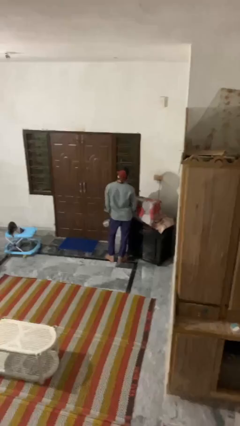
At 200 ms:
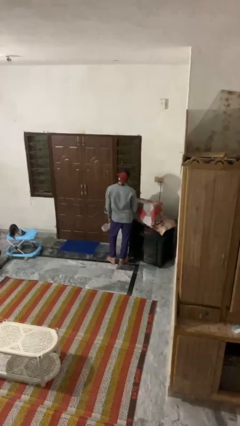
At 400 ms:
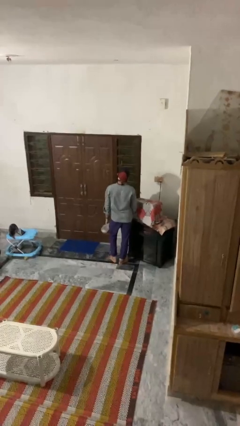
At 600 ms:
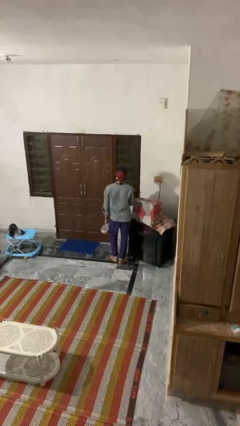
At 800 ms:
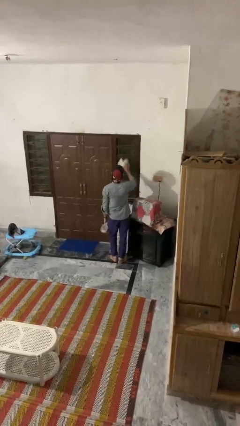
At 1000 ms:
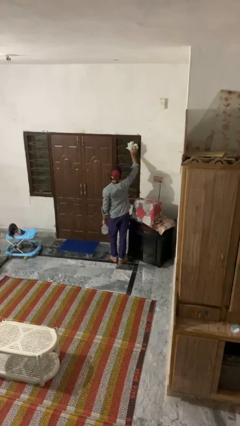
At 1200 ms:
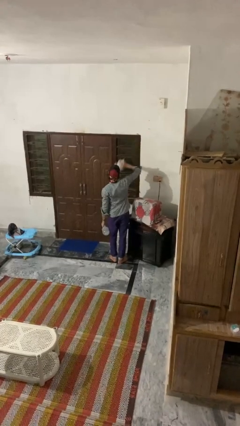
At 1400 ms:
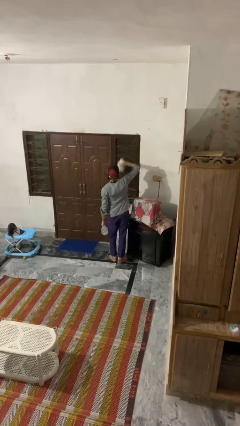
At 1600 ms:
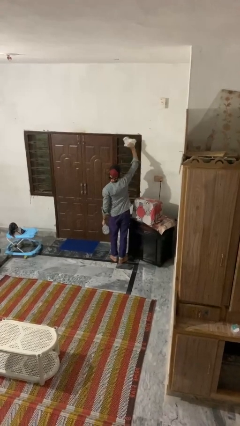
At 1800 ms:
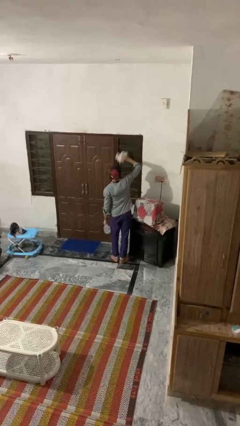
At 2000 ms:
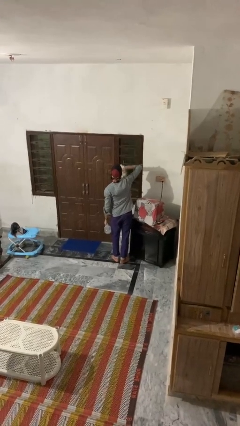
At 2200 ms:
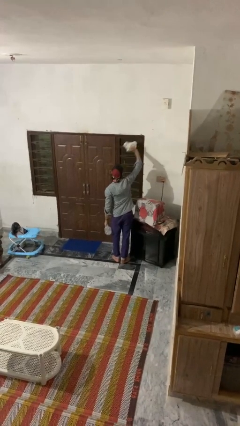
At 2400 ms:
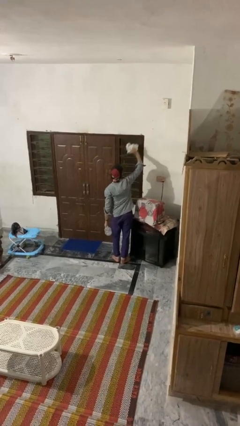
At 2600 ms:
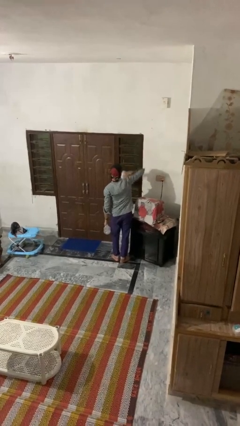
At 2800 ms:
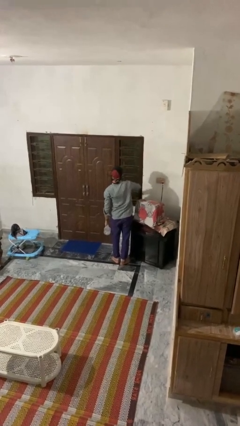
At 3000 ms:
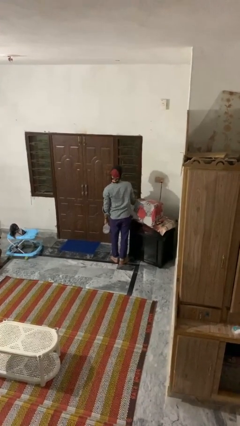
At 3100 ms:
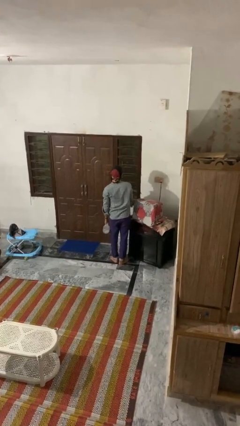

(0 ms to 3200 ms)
person washes window

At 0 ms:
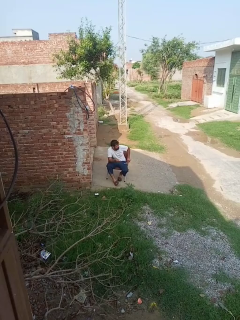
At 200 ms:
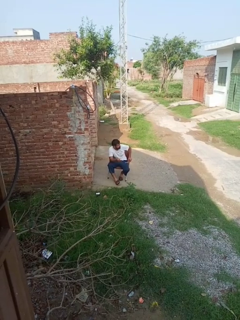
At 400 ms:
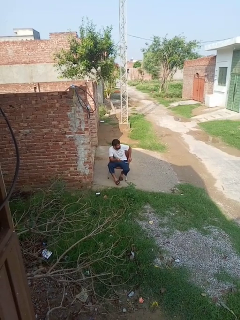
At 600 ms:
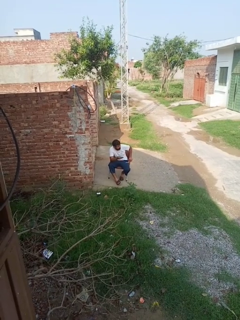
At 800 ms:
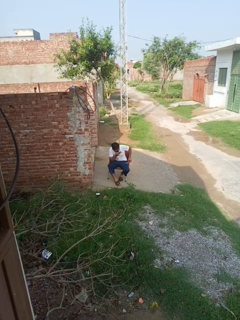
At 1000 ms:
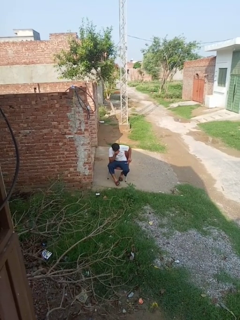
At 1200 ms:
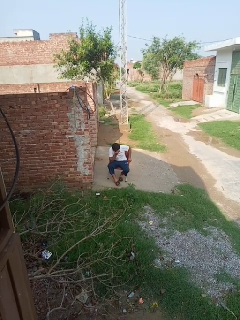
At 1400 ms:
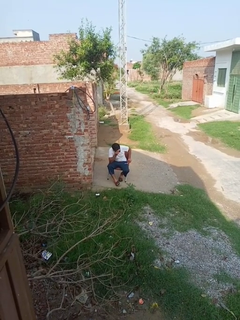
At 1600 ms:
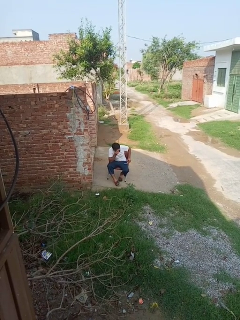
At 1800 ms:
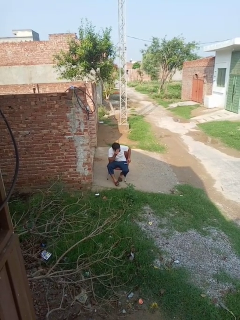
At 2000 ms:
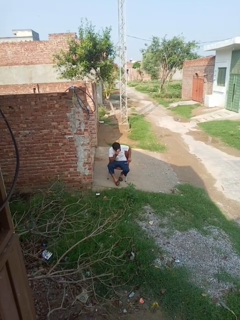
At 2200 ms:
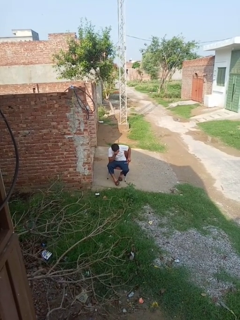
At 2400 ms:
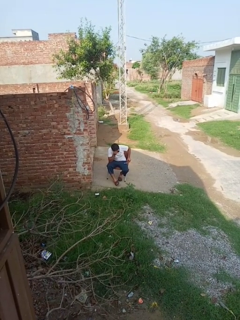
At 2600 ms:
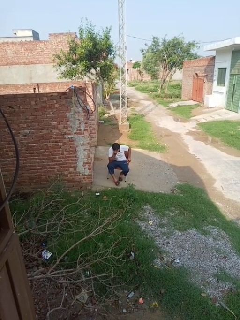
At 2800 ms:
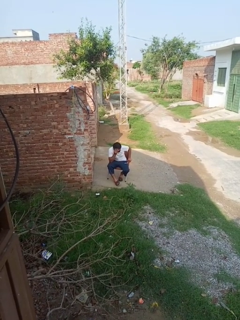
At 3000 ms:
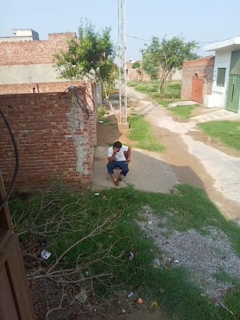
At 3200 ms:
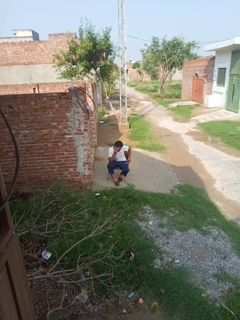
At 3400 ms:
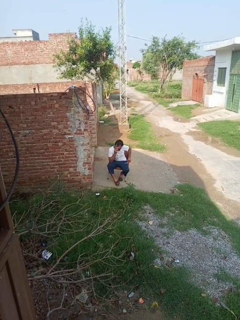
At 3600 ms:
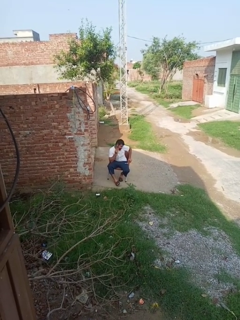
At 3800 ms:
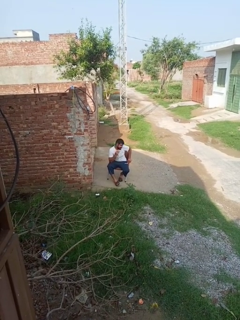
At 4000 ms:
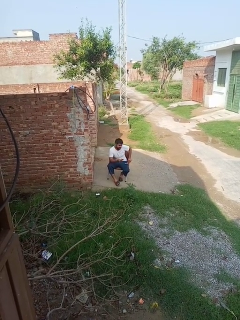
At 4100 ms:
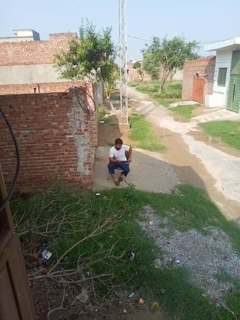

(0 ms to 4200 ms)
person wipes mouth with napkin

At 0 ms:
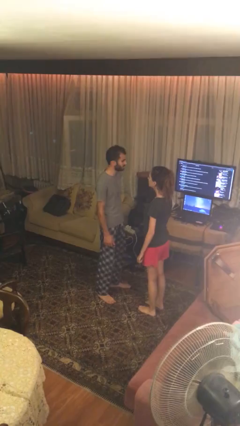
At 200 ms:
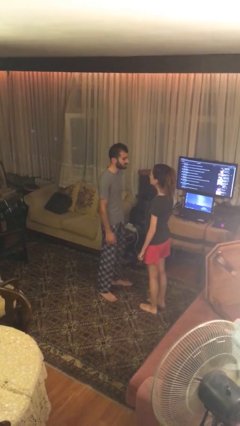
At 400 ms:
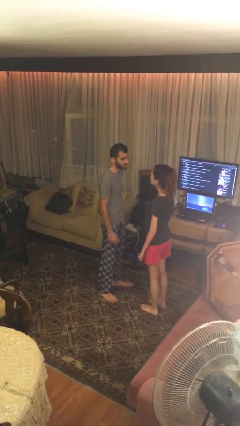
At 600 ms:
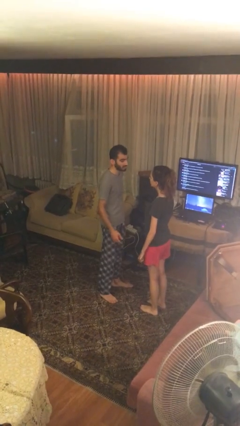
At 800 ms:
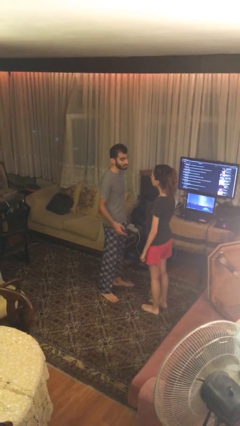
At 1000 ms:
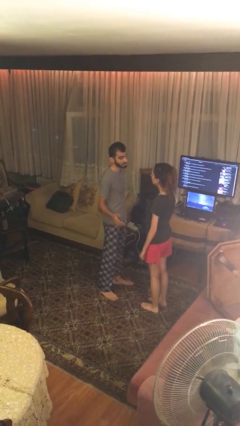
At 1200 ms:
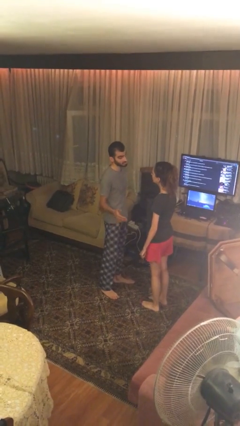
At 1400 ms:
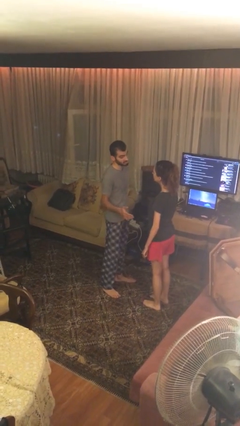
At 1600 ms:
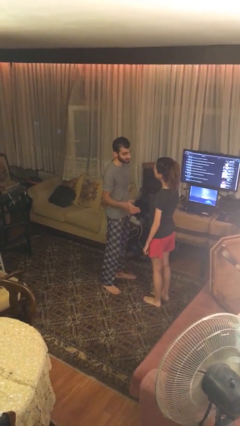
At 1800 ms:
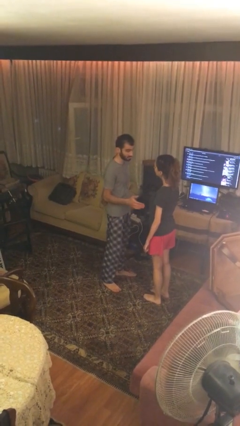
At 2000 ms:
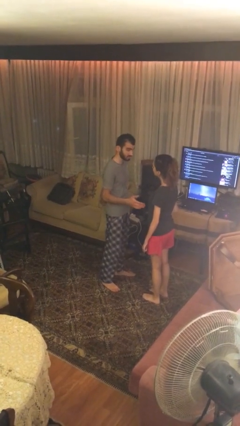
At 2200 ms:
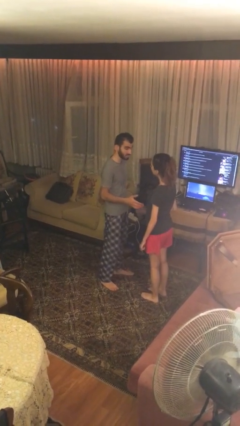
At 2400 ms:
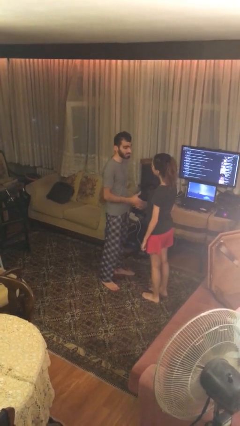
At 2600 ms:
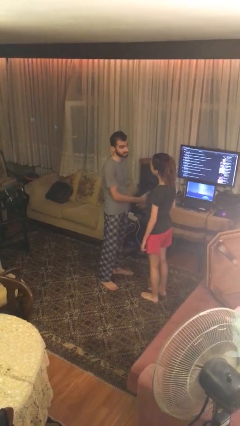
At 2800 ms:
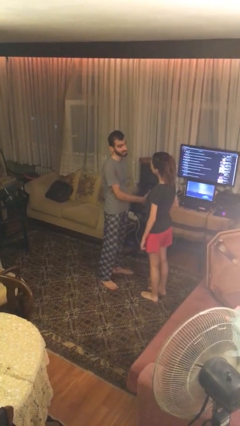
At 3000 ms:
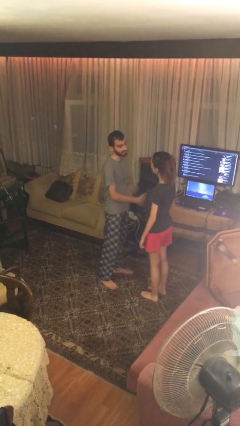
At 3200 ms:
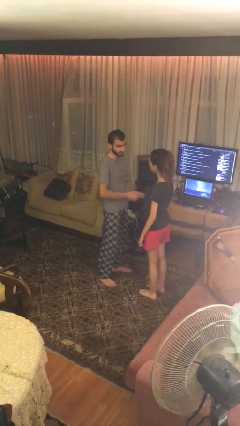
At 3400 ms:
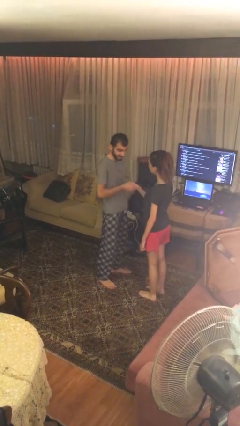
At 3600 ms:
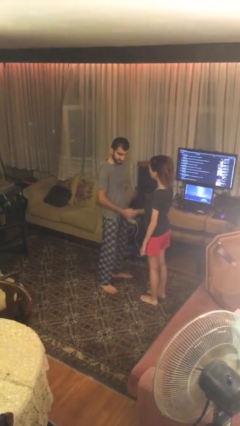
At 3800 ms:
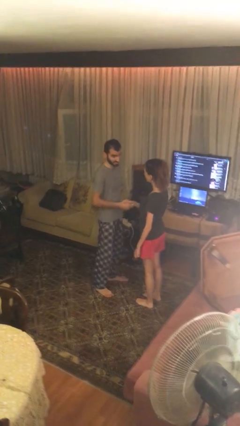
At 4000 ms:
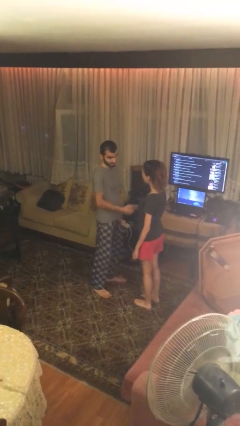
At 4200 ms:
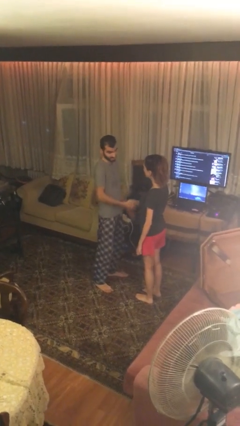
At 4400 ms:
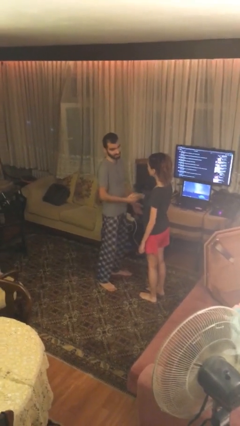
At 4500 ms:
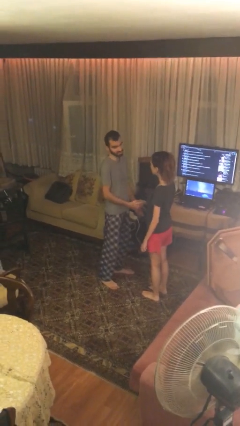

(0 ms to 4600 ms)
person shakes hand

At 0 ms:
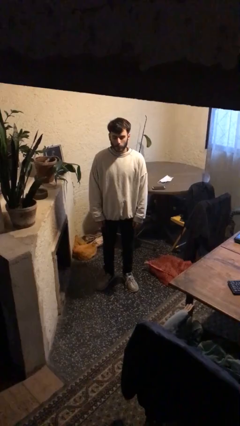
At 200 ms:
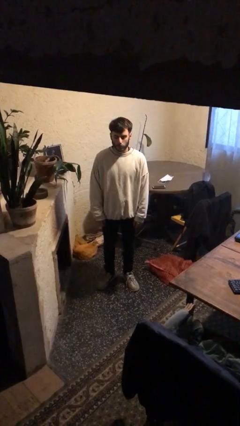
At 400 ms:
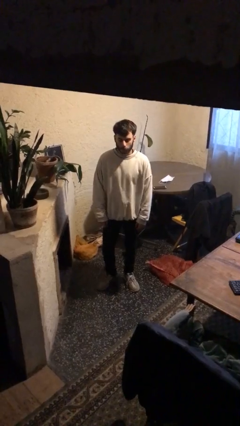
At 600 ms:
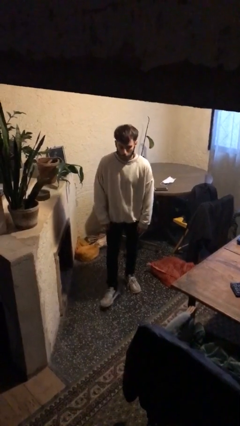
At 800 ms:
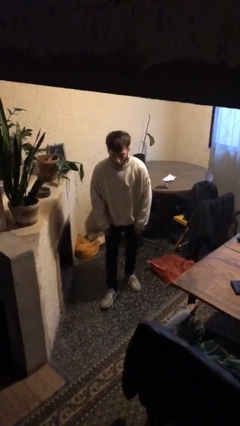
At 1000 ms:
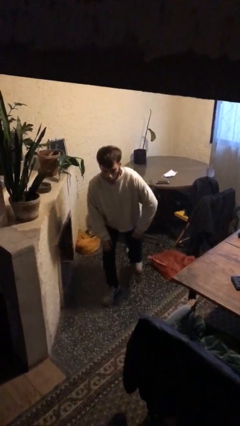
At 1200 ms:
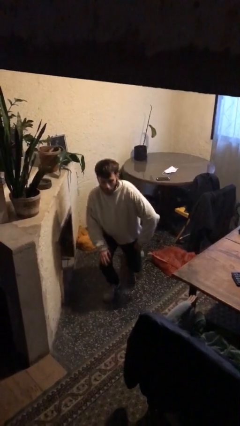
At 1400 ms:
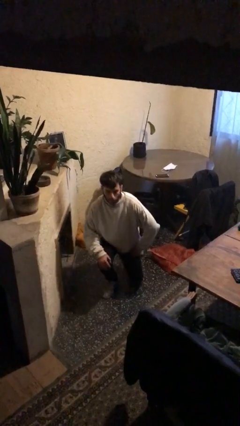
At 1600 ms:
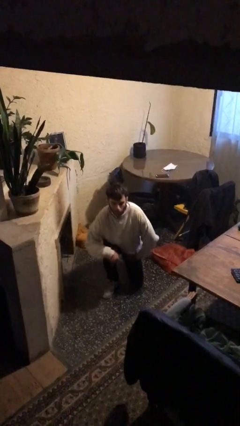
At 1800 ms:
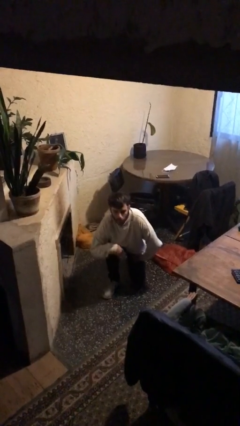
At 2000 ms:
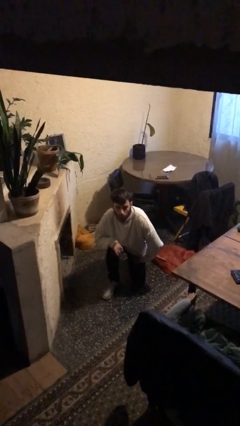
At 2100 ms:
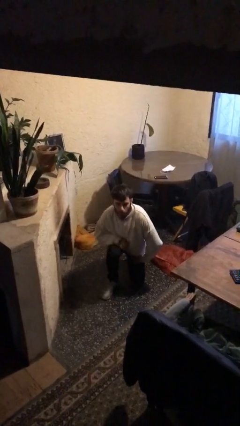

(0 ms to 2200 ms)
person kneels

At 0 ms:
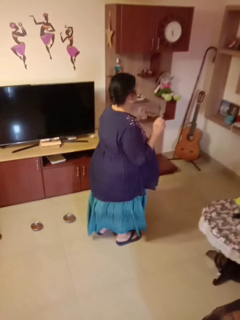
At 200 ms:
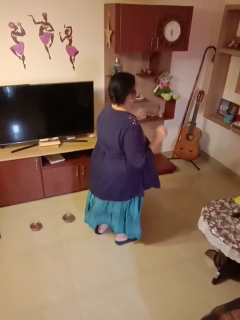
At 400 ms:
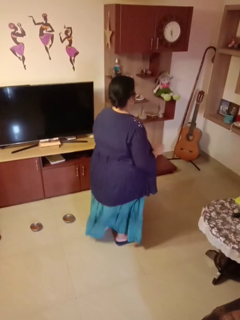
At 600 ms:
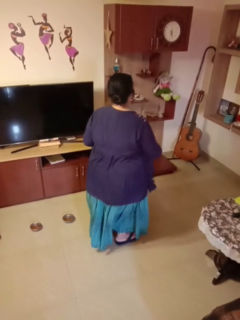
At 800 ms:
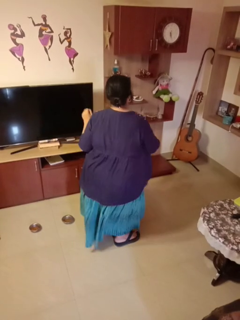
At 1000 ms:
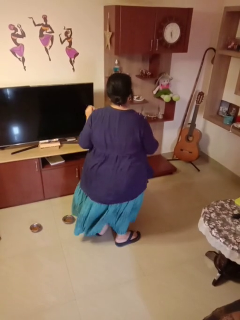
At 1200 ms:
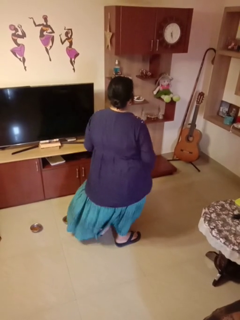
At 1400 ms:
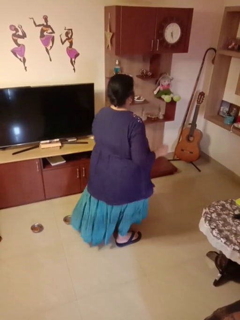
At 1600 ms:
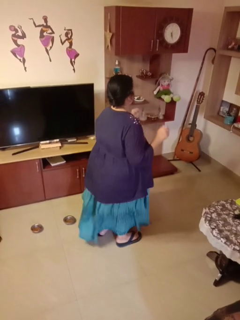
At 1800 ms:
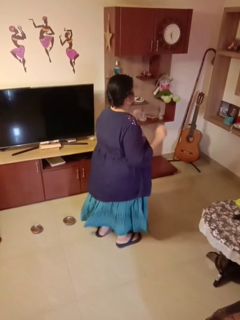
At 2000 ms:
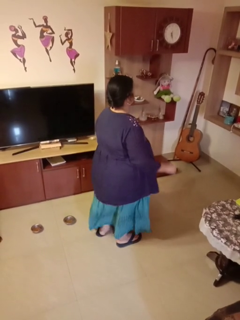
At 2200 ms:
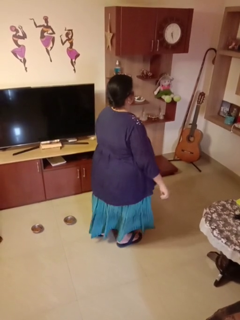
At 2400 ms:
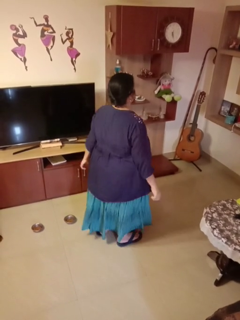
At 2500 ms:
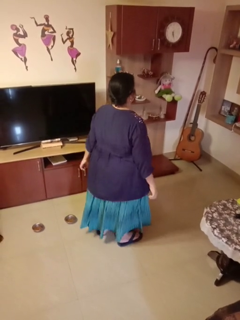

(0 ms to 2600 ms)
person dances in place

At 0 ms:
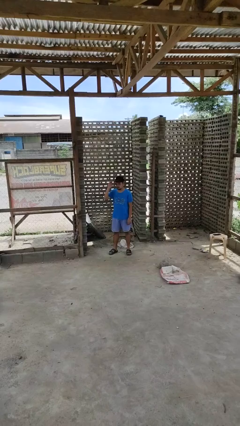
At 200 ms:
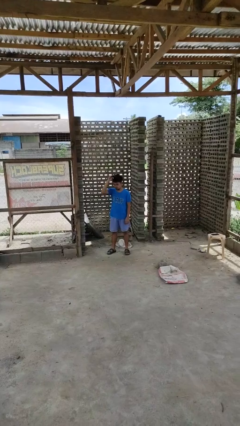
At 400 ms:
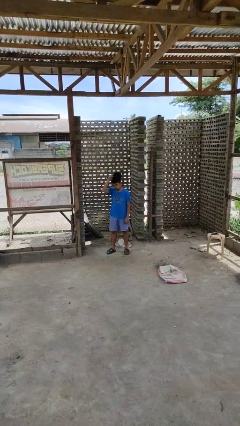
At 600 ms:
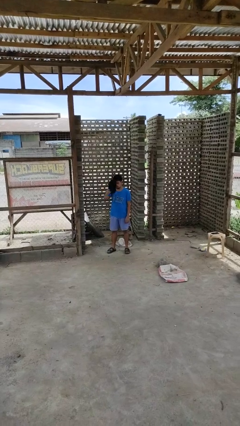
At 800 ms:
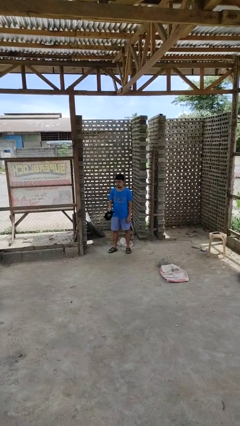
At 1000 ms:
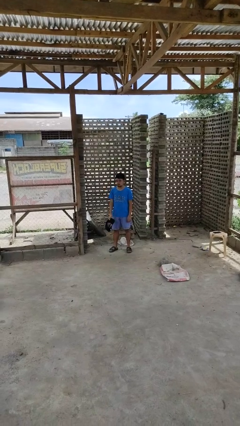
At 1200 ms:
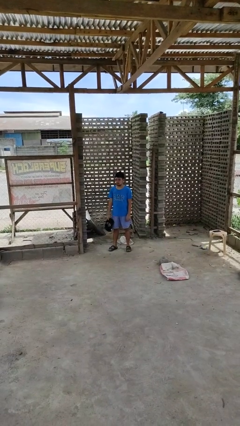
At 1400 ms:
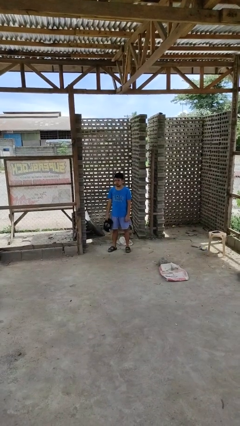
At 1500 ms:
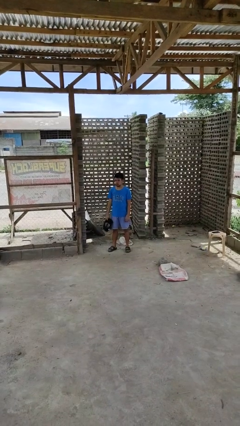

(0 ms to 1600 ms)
person takes off hat

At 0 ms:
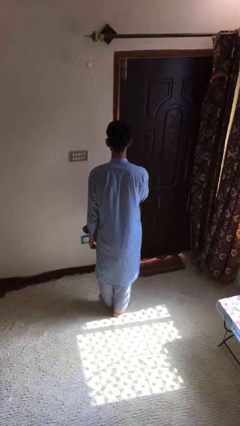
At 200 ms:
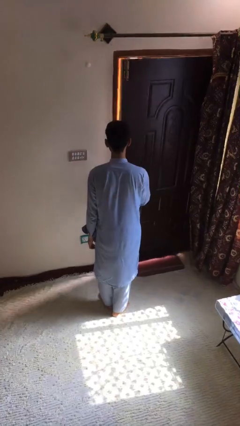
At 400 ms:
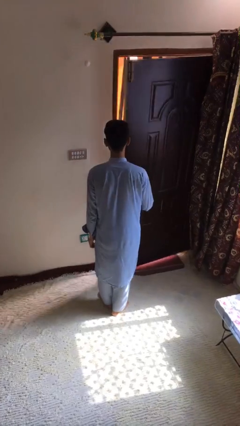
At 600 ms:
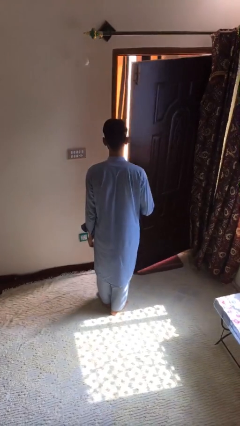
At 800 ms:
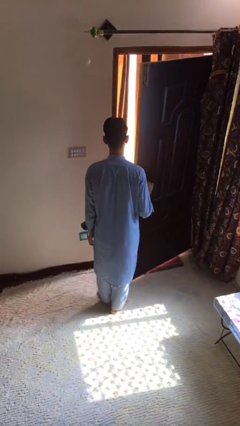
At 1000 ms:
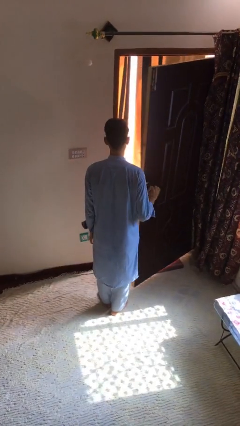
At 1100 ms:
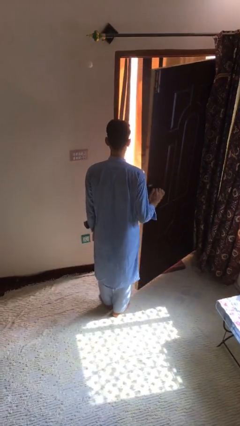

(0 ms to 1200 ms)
person opens facility door
